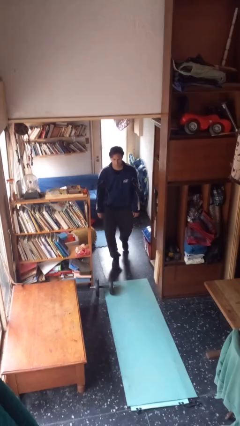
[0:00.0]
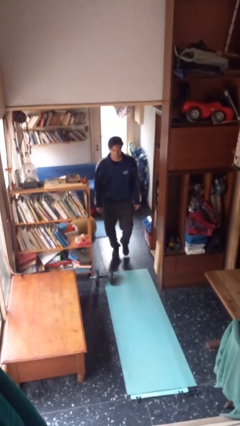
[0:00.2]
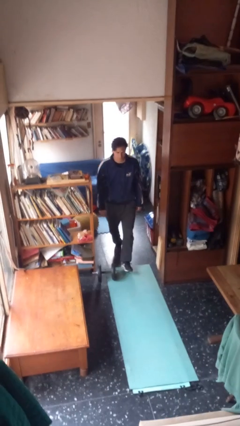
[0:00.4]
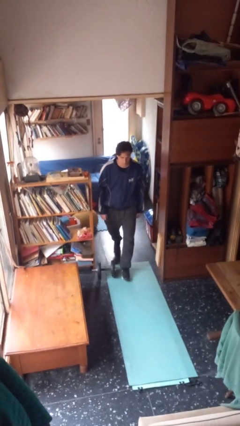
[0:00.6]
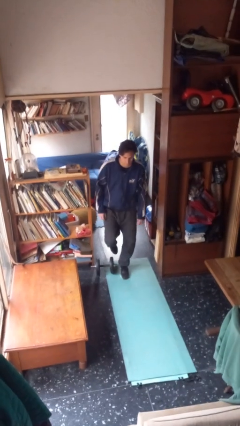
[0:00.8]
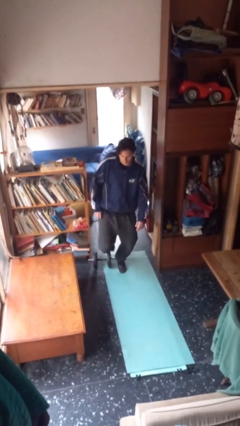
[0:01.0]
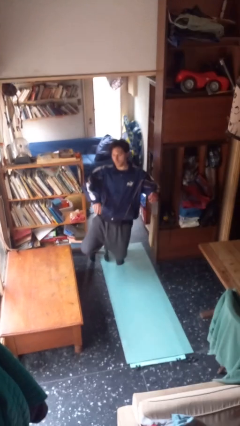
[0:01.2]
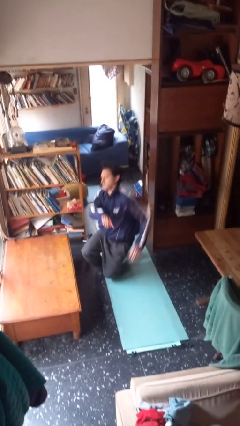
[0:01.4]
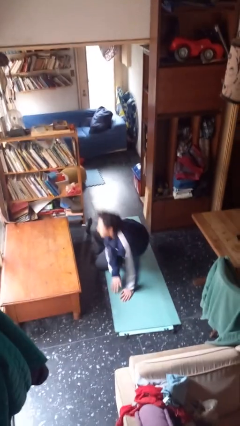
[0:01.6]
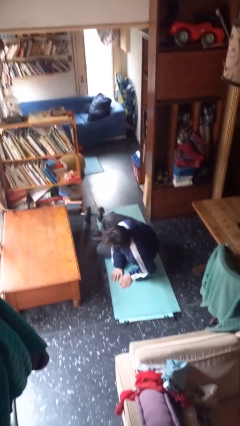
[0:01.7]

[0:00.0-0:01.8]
person trips on object on floor

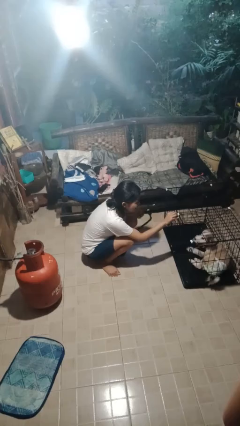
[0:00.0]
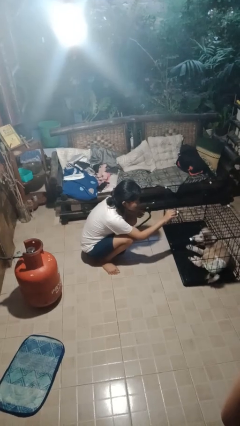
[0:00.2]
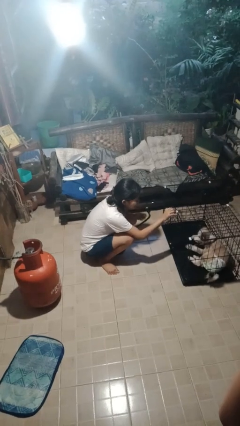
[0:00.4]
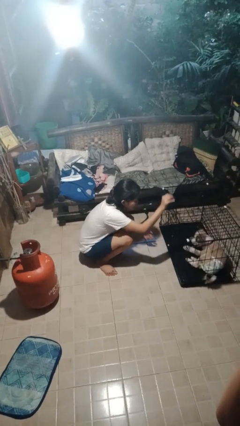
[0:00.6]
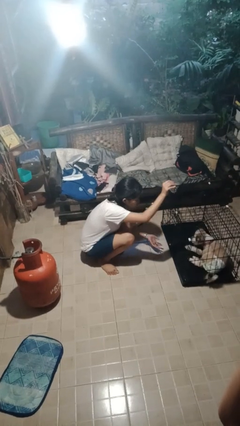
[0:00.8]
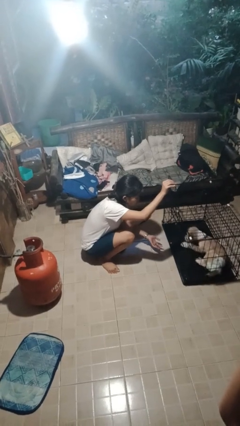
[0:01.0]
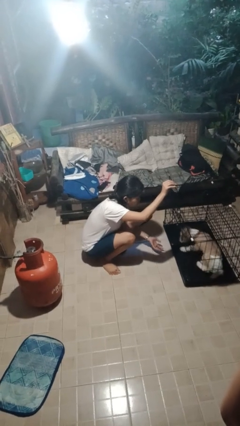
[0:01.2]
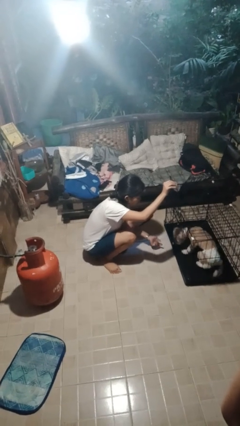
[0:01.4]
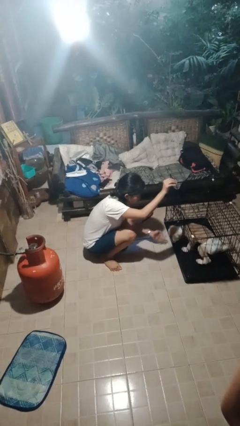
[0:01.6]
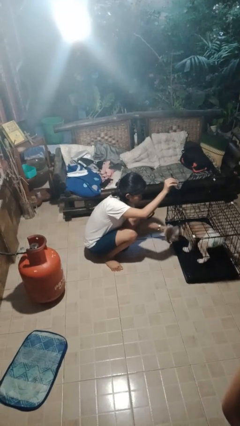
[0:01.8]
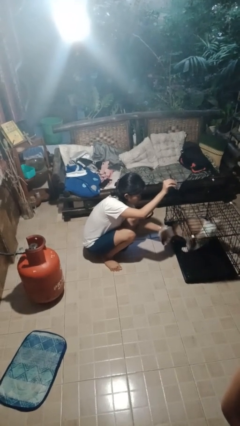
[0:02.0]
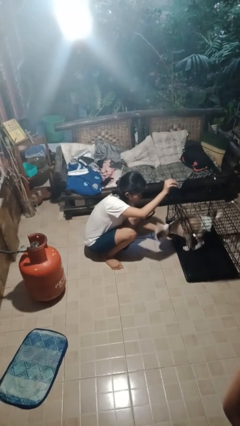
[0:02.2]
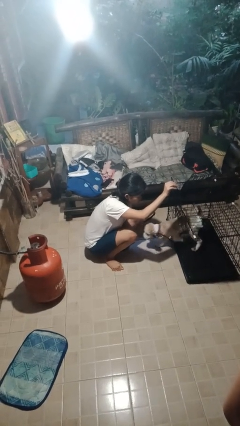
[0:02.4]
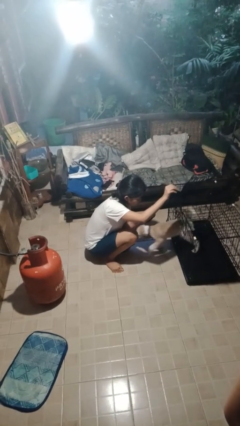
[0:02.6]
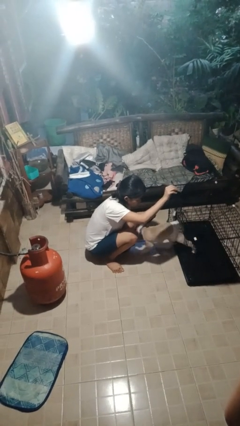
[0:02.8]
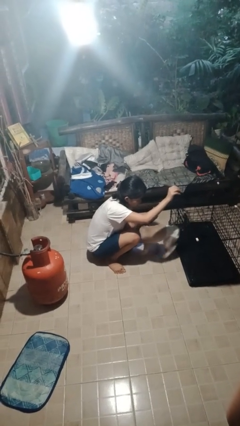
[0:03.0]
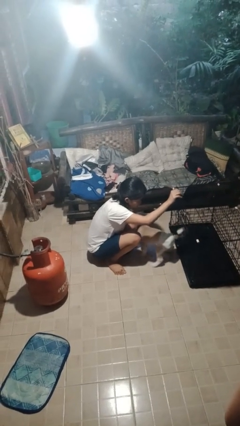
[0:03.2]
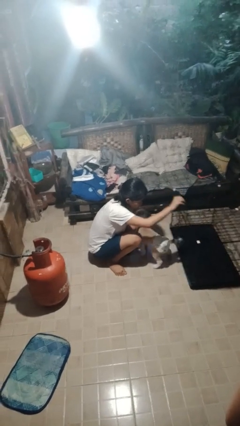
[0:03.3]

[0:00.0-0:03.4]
person uncrates dog

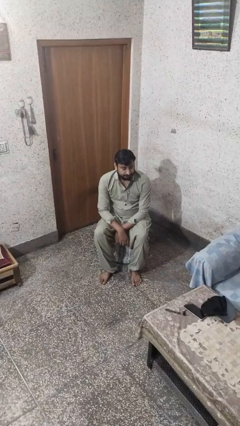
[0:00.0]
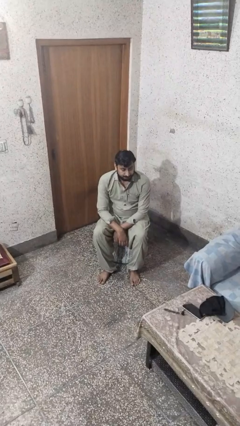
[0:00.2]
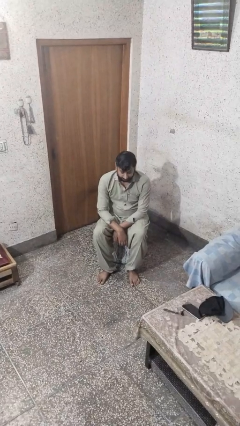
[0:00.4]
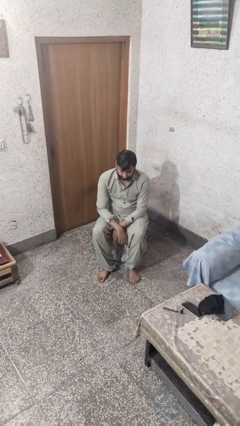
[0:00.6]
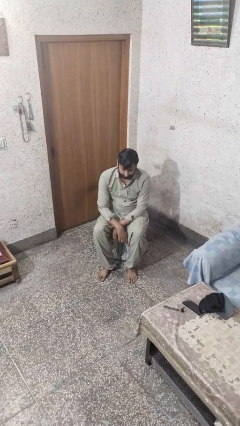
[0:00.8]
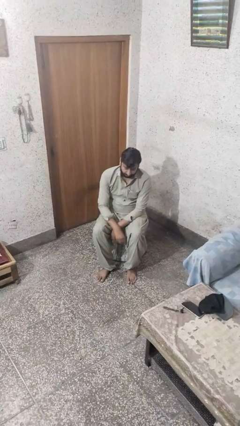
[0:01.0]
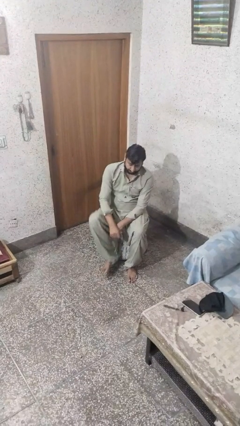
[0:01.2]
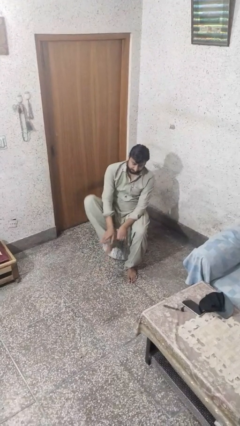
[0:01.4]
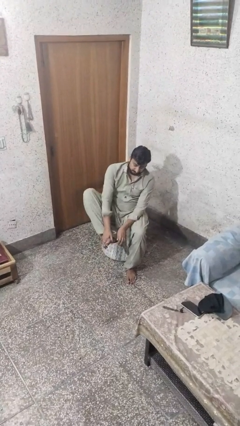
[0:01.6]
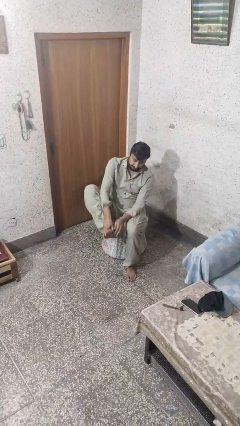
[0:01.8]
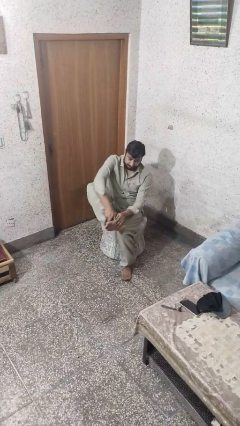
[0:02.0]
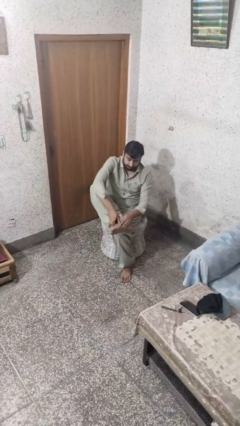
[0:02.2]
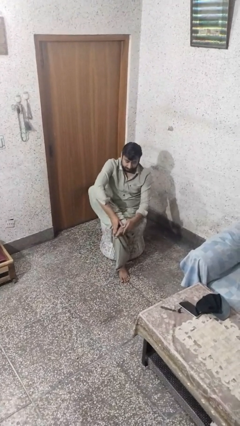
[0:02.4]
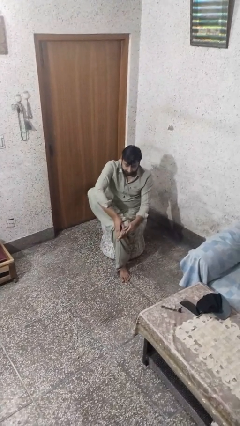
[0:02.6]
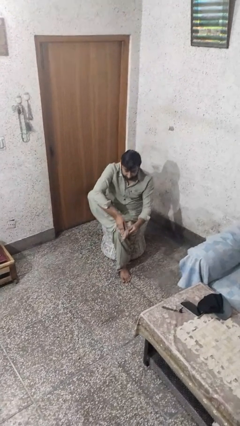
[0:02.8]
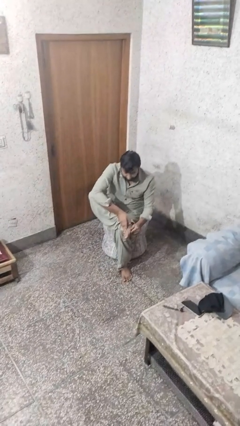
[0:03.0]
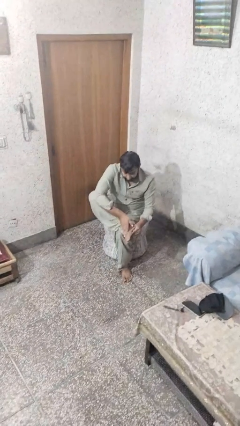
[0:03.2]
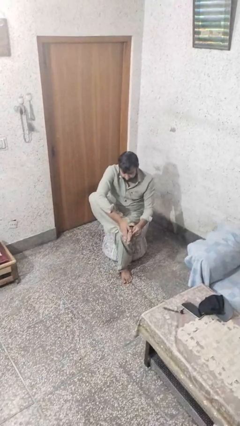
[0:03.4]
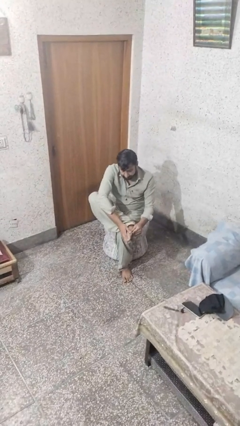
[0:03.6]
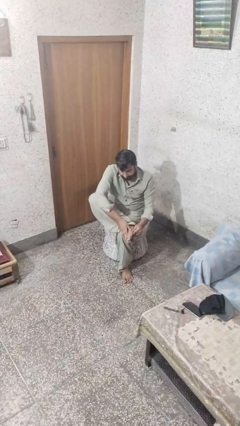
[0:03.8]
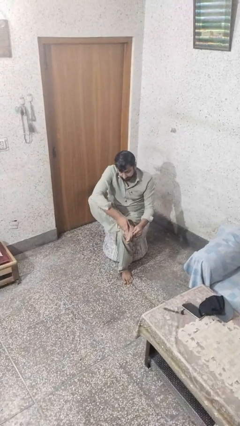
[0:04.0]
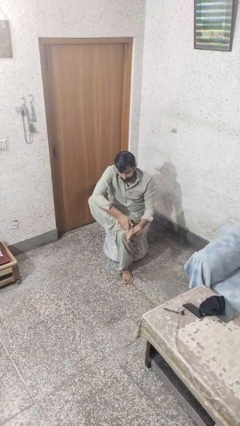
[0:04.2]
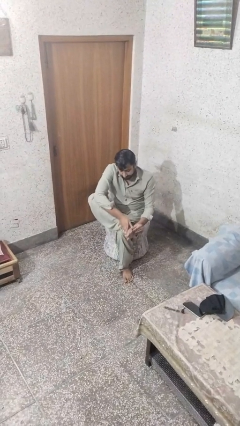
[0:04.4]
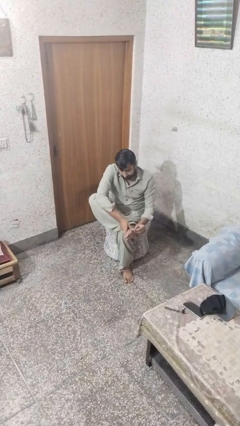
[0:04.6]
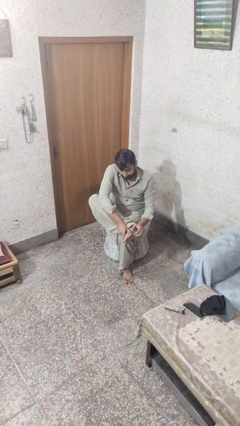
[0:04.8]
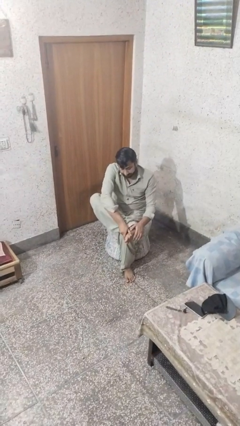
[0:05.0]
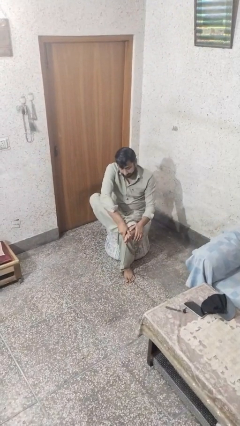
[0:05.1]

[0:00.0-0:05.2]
person rubs foot

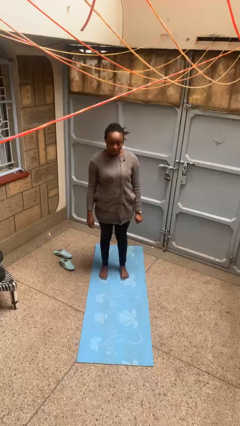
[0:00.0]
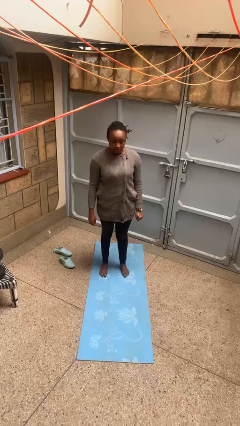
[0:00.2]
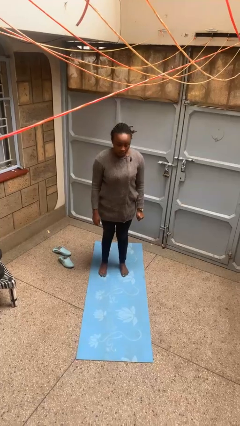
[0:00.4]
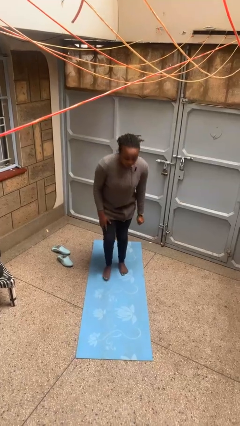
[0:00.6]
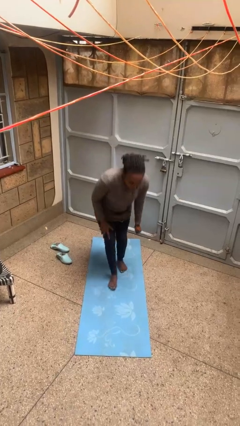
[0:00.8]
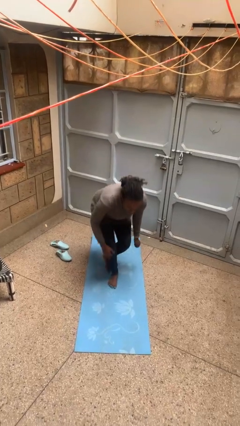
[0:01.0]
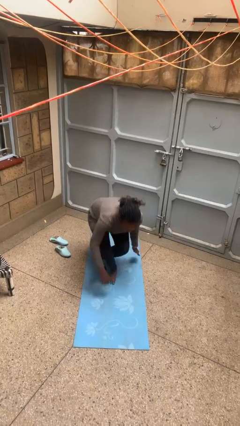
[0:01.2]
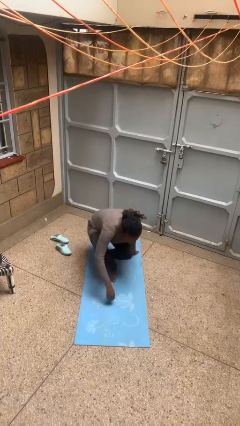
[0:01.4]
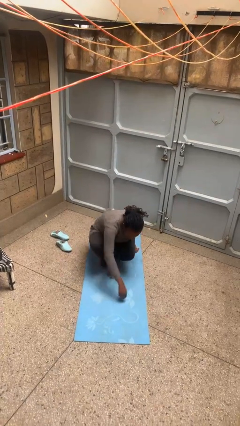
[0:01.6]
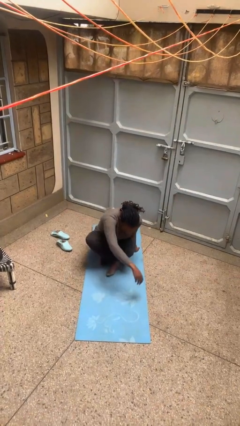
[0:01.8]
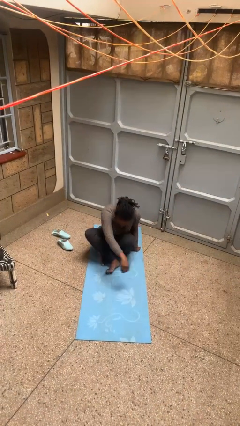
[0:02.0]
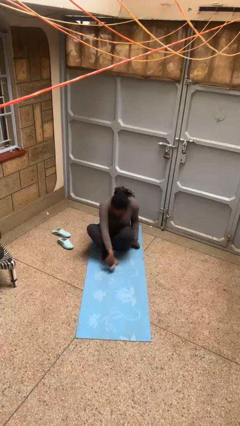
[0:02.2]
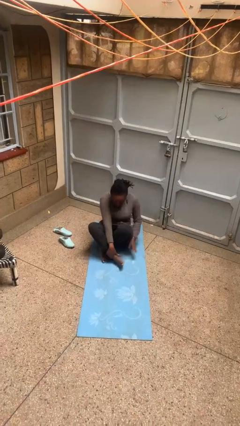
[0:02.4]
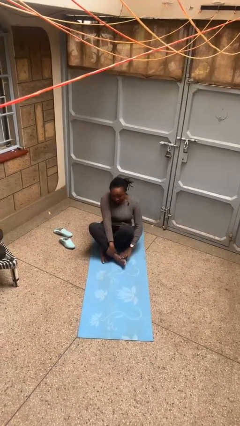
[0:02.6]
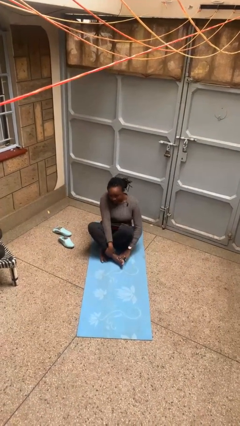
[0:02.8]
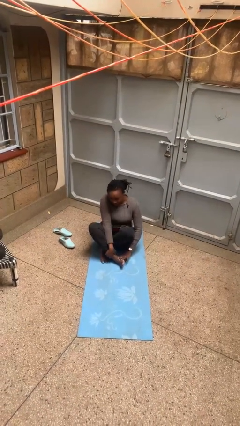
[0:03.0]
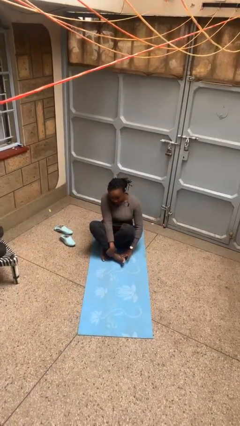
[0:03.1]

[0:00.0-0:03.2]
person sits crisscross

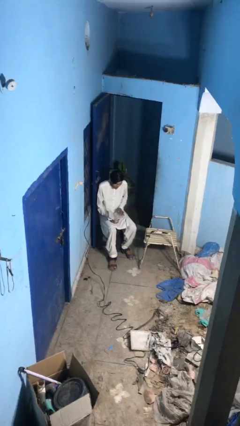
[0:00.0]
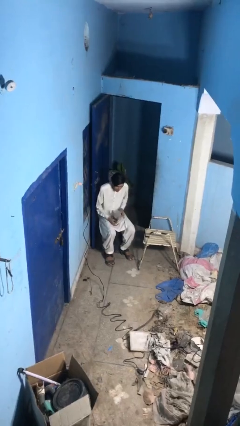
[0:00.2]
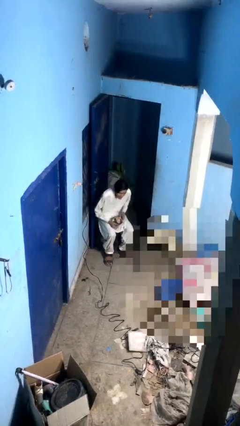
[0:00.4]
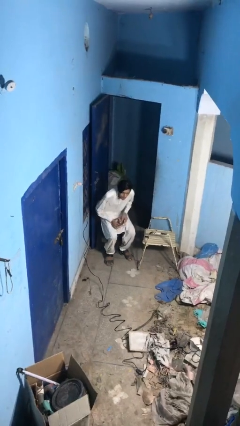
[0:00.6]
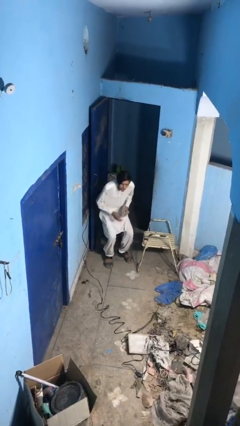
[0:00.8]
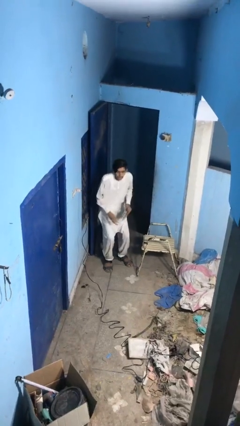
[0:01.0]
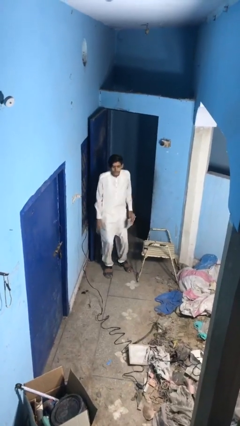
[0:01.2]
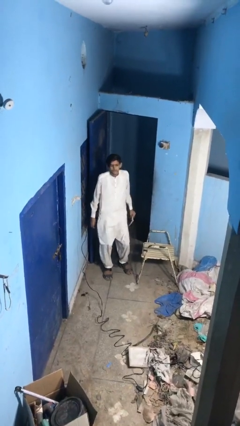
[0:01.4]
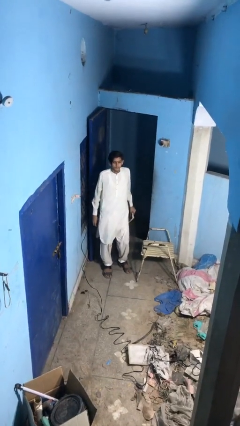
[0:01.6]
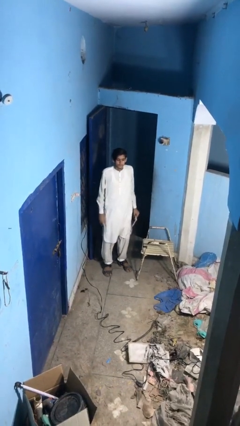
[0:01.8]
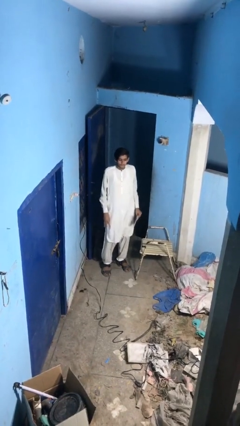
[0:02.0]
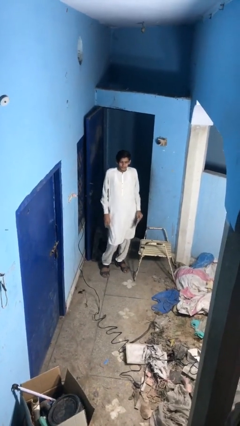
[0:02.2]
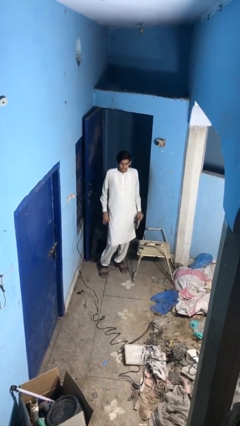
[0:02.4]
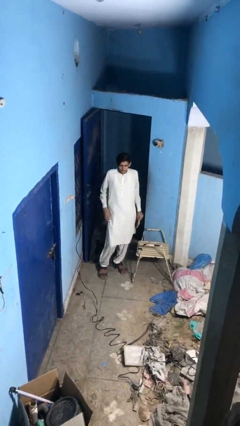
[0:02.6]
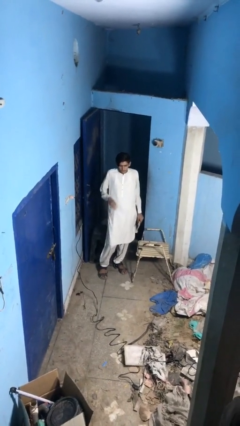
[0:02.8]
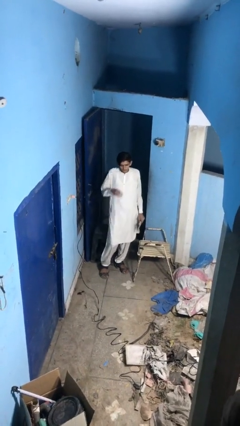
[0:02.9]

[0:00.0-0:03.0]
person stands up

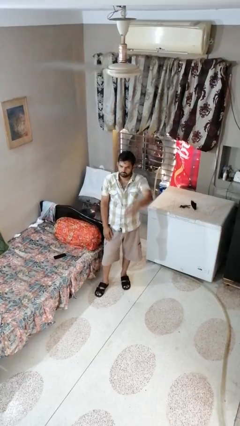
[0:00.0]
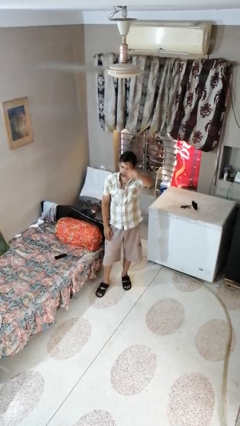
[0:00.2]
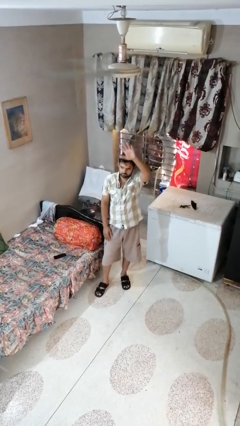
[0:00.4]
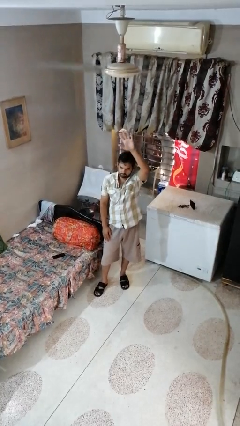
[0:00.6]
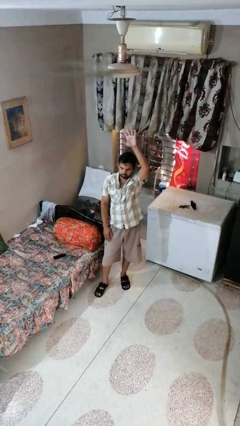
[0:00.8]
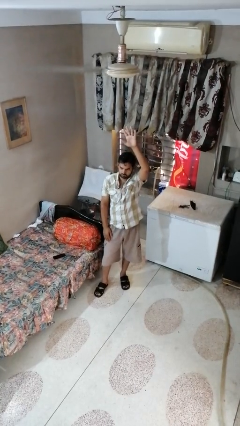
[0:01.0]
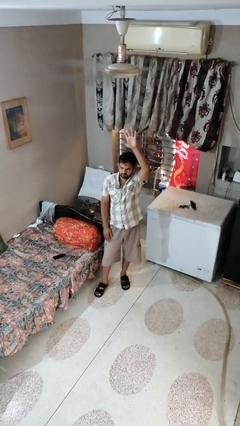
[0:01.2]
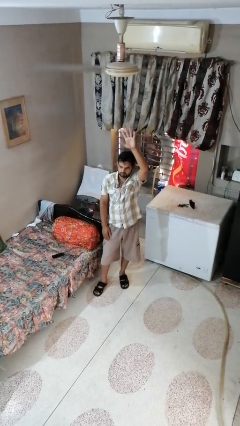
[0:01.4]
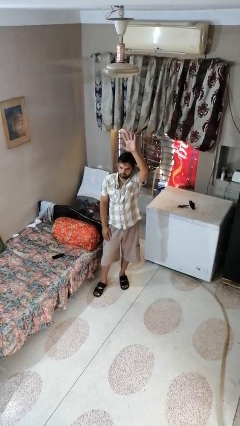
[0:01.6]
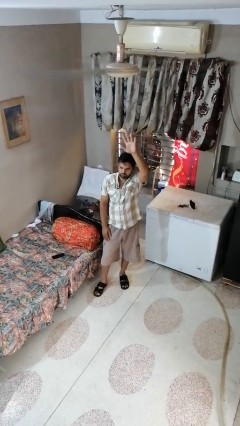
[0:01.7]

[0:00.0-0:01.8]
person gestures swipe up
